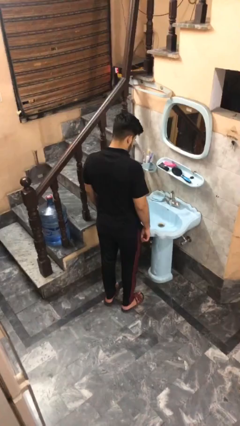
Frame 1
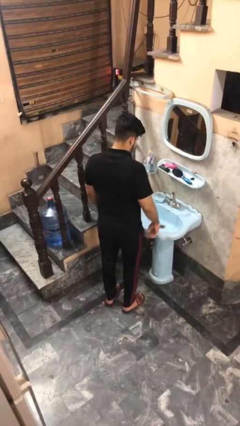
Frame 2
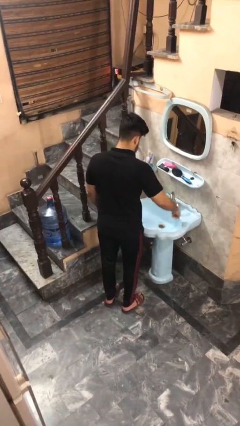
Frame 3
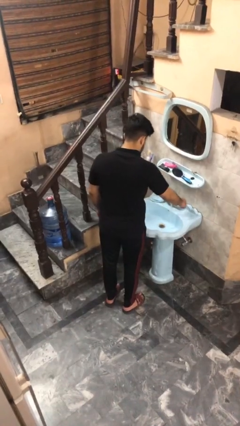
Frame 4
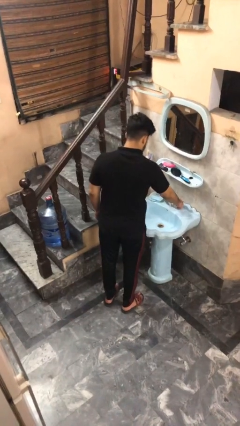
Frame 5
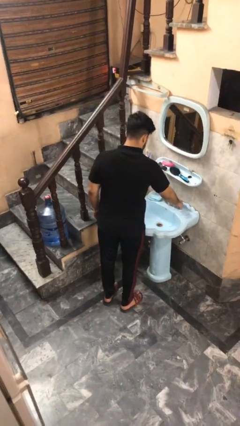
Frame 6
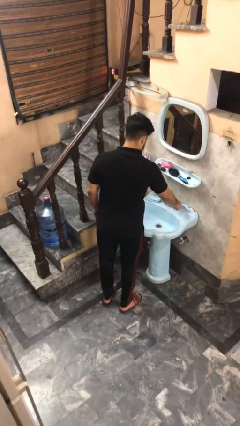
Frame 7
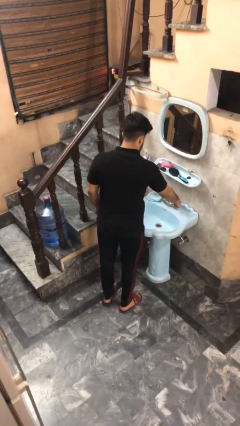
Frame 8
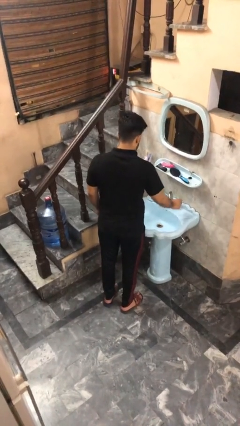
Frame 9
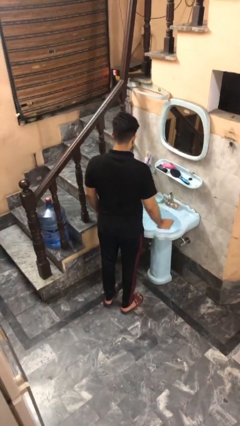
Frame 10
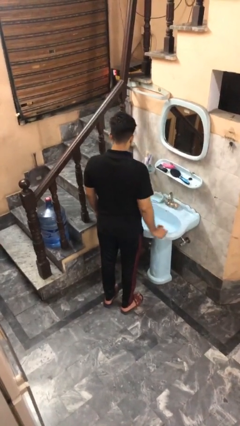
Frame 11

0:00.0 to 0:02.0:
person turns off faucet

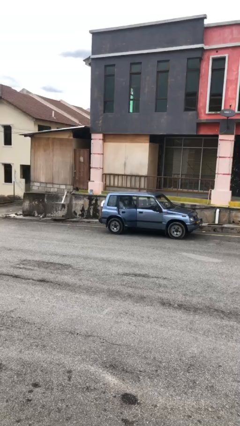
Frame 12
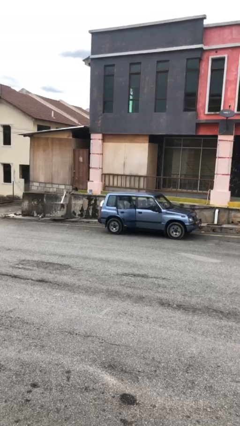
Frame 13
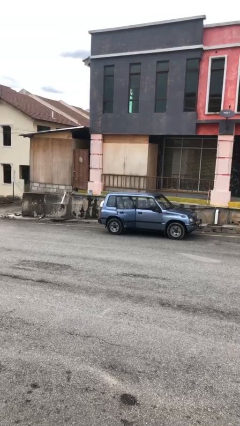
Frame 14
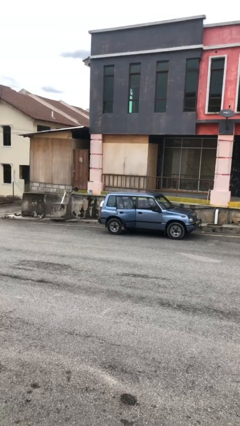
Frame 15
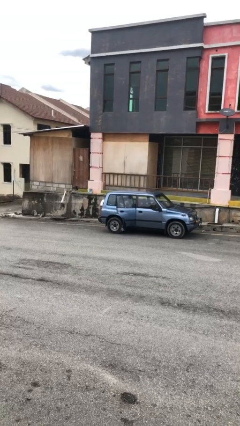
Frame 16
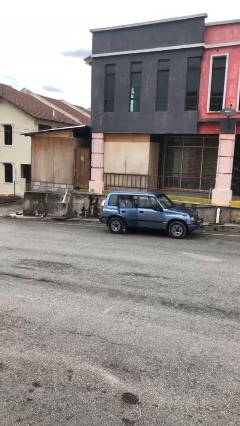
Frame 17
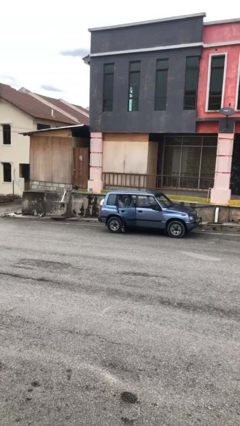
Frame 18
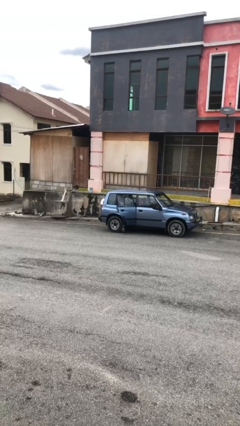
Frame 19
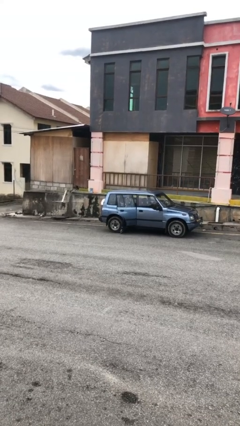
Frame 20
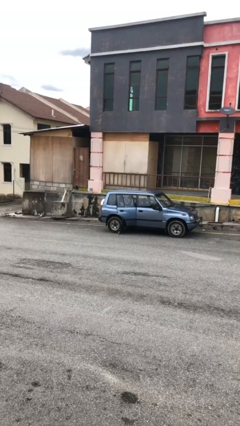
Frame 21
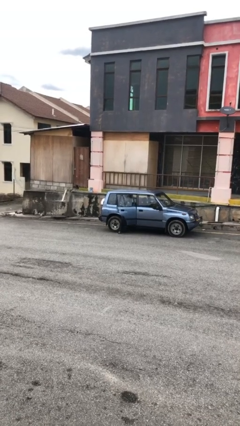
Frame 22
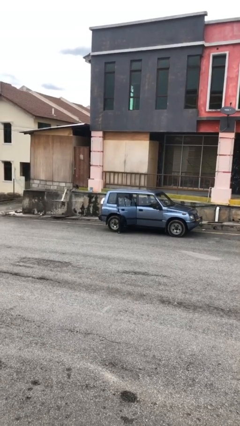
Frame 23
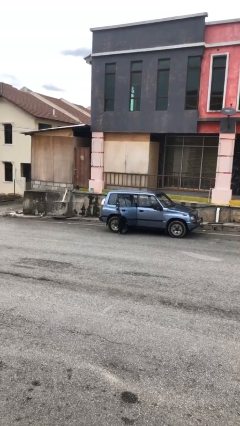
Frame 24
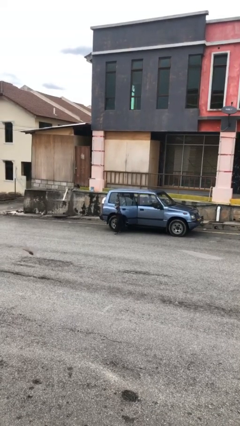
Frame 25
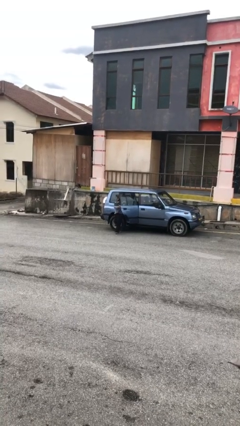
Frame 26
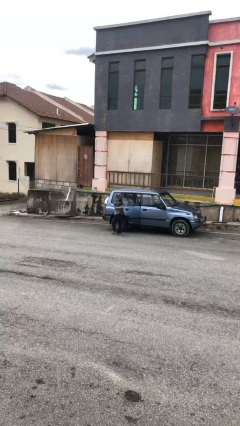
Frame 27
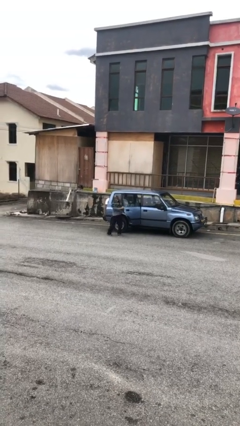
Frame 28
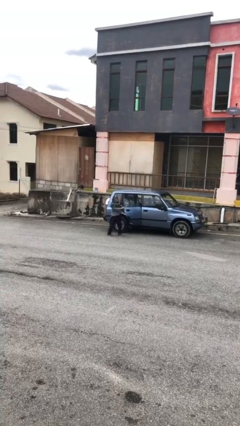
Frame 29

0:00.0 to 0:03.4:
person exits car

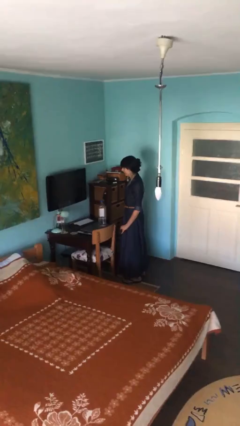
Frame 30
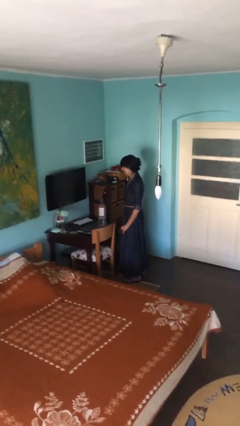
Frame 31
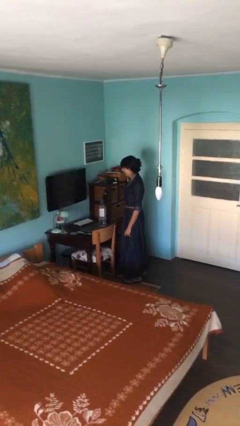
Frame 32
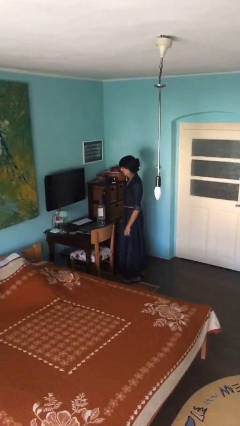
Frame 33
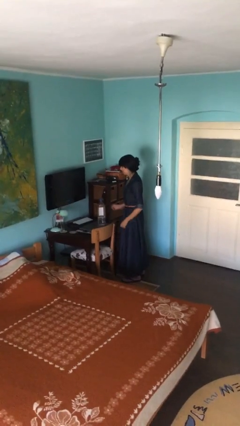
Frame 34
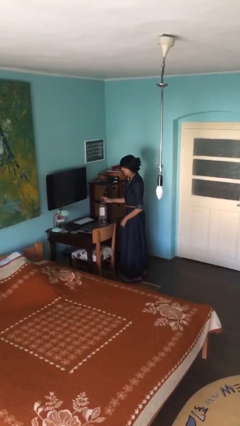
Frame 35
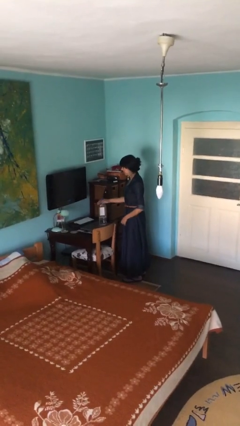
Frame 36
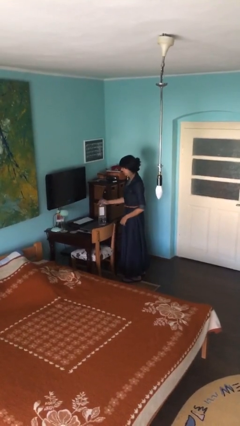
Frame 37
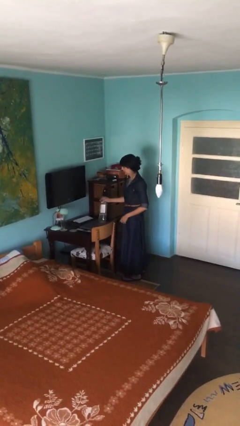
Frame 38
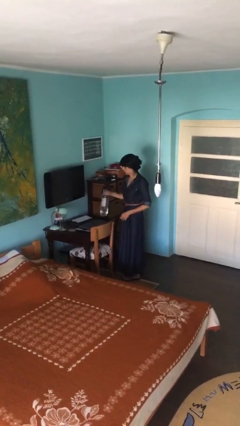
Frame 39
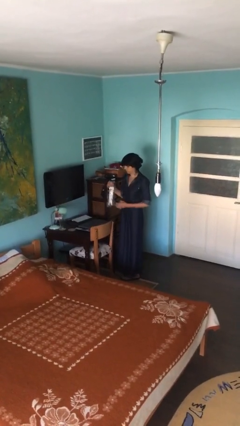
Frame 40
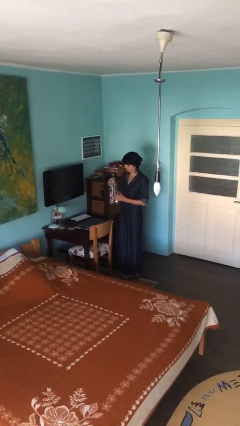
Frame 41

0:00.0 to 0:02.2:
person picks up object from table

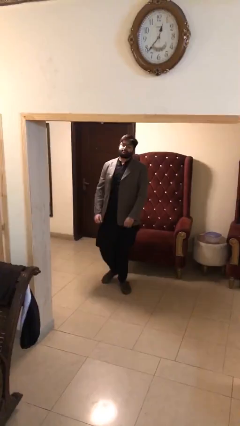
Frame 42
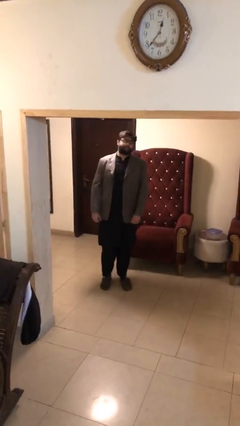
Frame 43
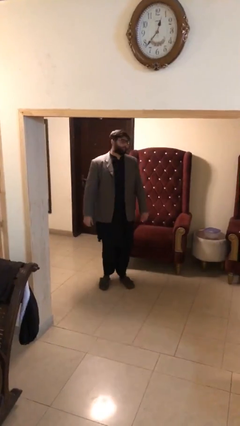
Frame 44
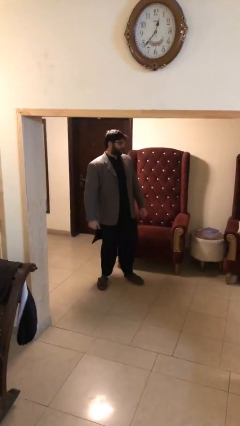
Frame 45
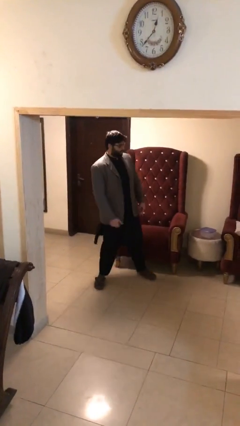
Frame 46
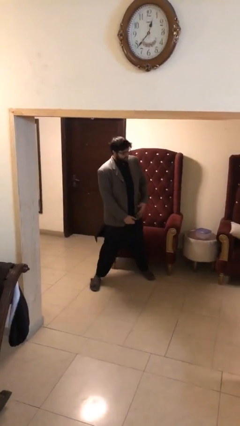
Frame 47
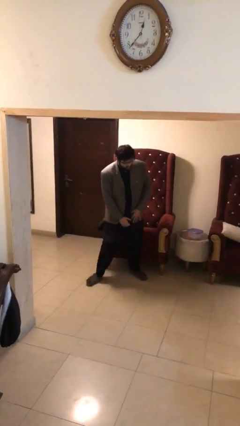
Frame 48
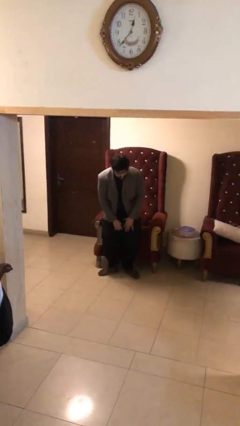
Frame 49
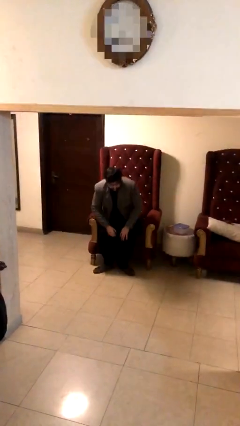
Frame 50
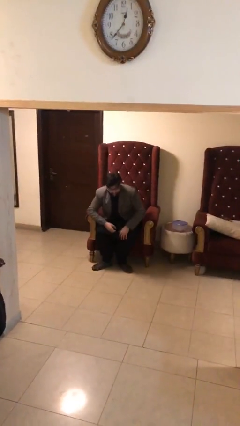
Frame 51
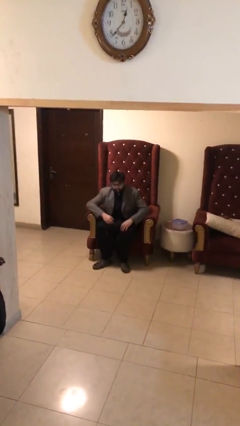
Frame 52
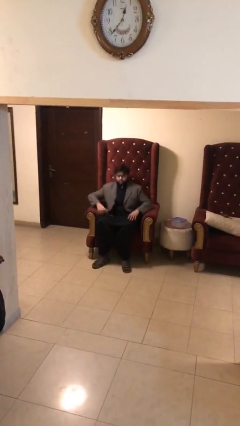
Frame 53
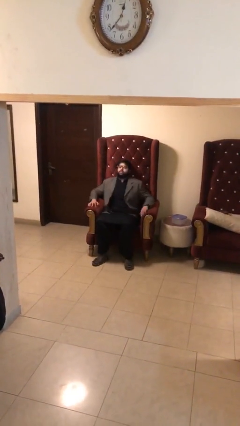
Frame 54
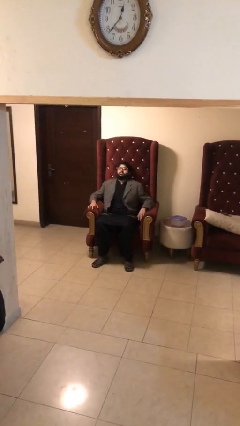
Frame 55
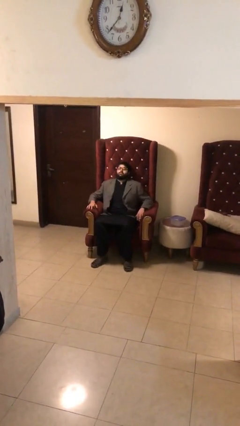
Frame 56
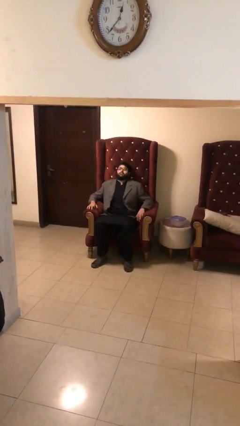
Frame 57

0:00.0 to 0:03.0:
person sits down

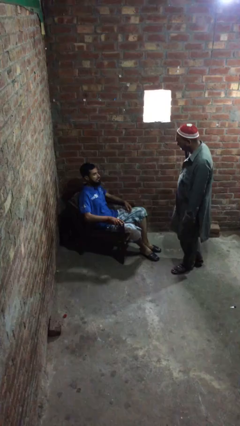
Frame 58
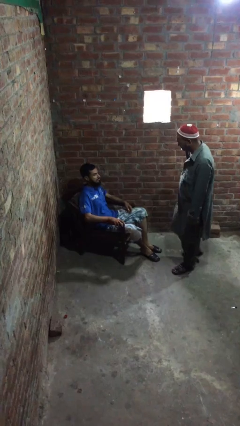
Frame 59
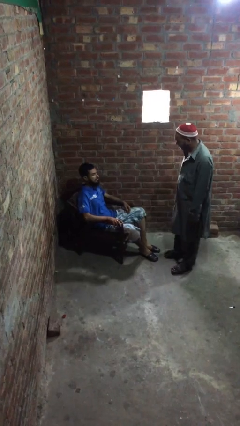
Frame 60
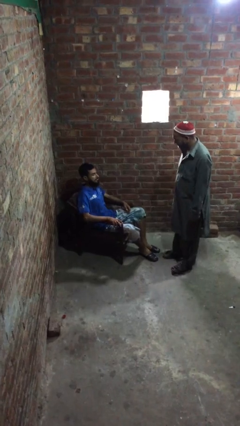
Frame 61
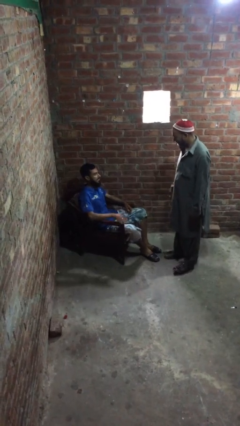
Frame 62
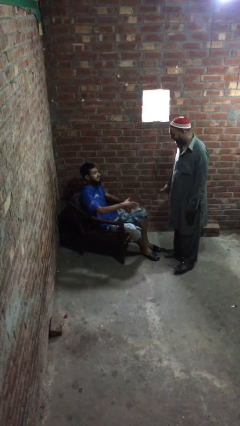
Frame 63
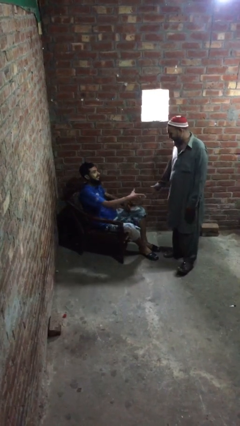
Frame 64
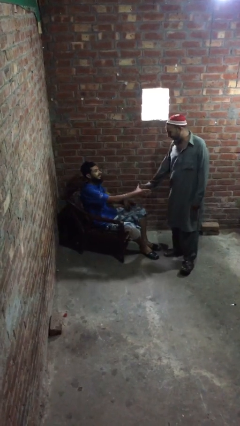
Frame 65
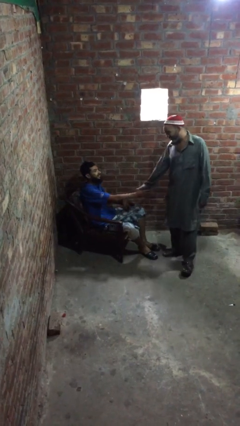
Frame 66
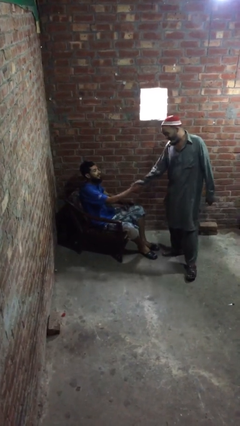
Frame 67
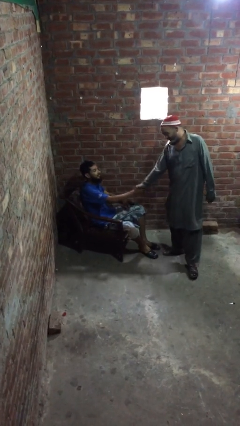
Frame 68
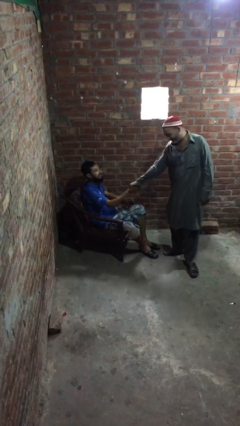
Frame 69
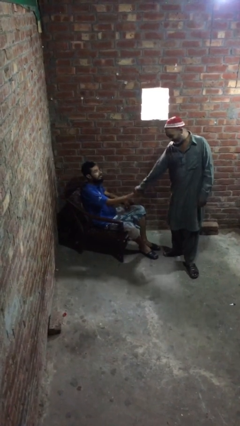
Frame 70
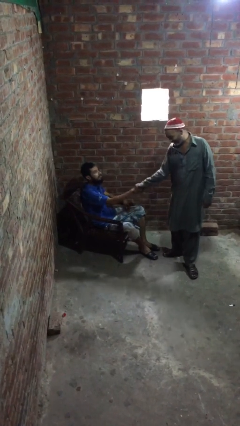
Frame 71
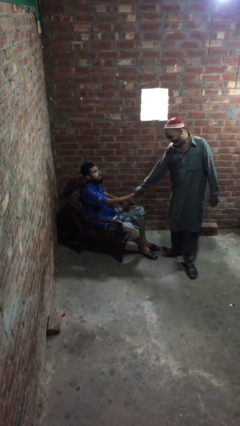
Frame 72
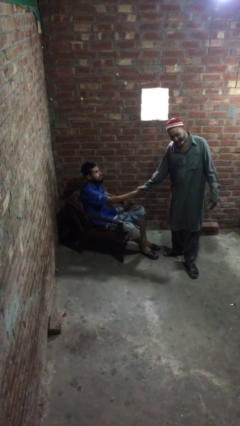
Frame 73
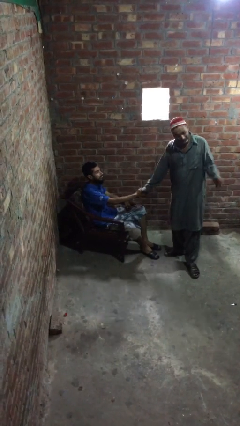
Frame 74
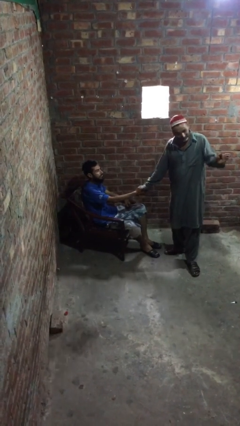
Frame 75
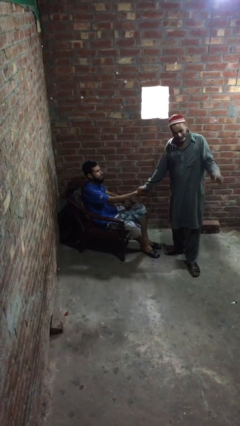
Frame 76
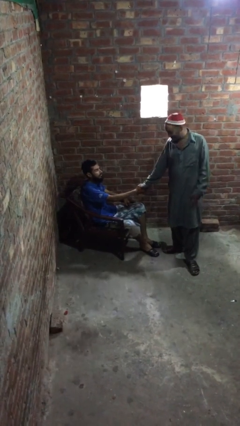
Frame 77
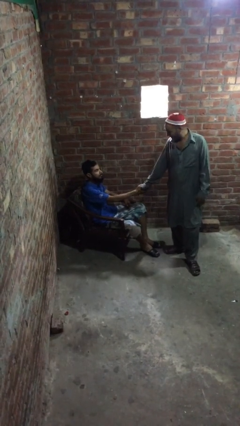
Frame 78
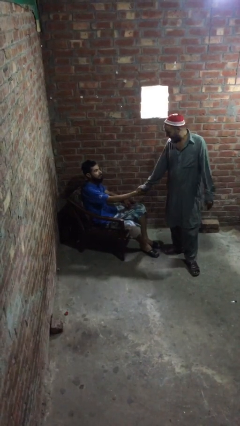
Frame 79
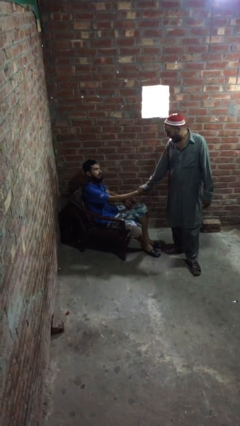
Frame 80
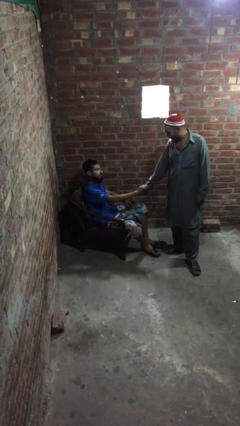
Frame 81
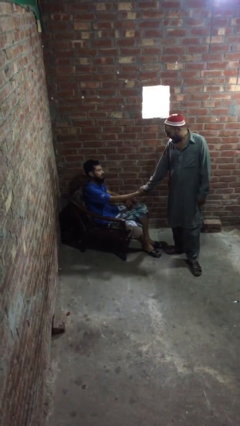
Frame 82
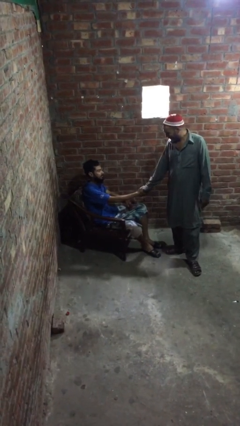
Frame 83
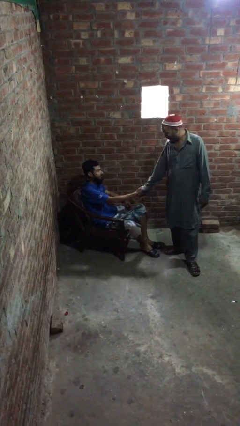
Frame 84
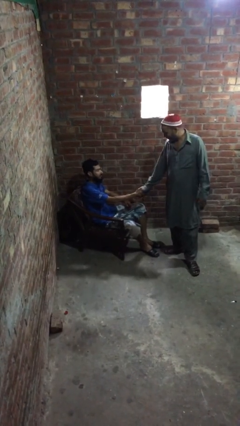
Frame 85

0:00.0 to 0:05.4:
person shakes hand

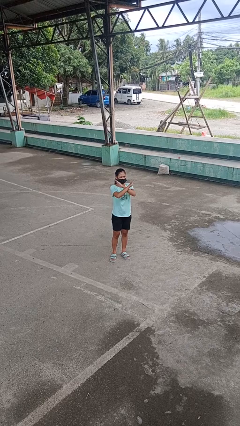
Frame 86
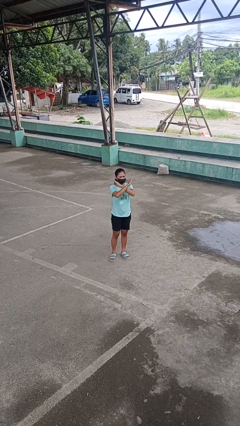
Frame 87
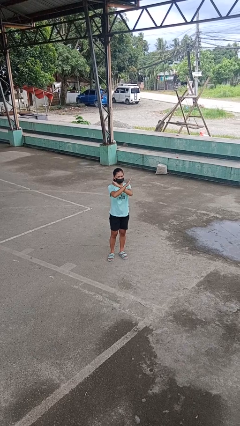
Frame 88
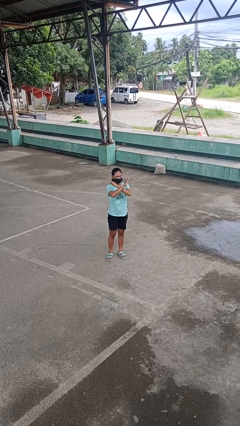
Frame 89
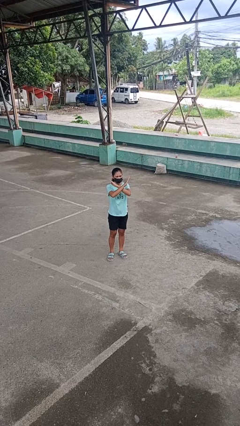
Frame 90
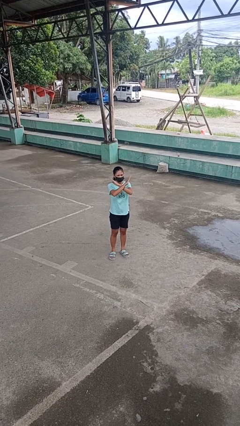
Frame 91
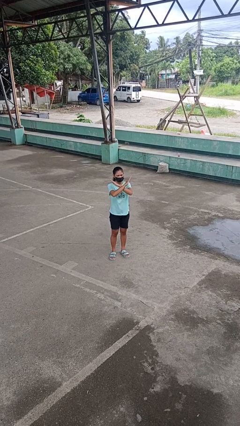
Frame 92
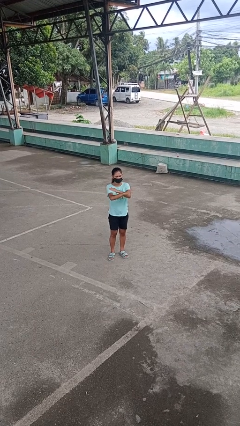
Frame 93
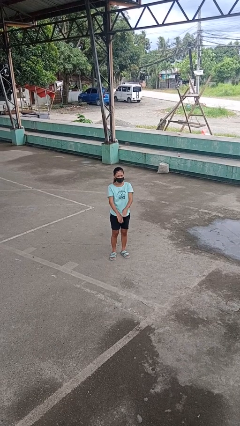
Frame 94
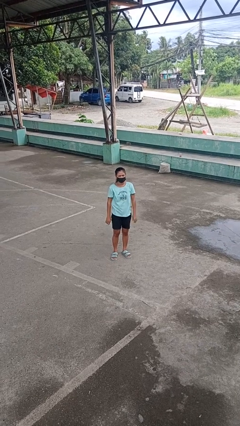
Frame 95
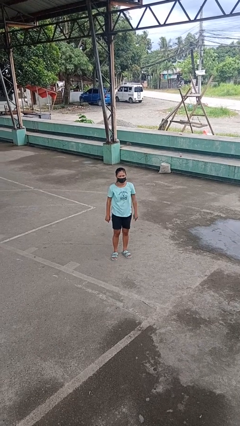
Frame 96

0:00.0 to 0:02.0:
person gestures arms x
